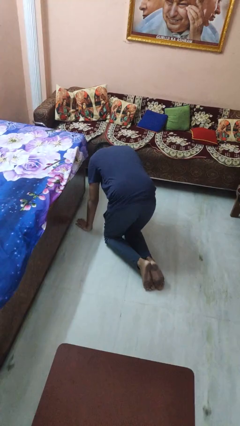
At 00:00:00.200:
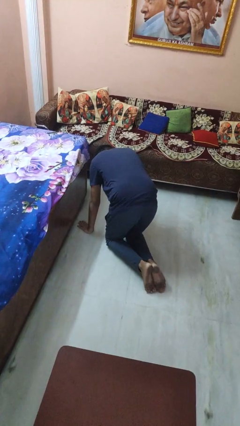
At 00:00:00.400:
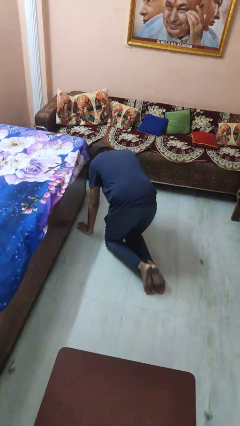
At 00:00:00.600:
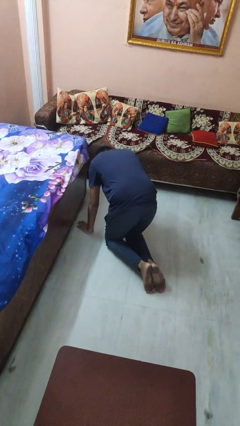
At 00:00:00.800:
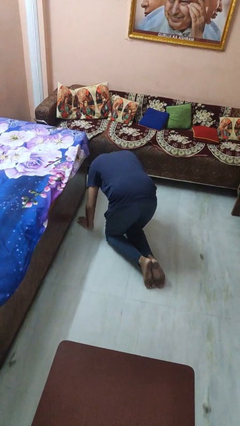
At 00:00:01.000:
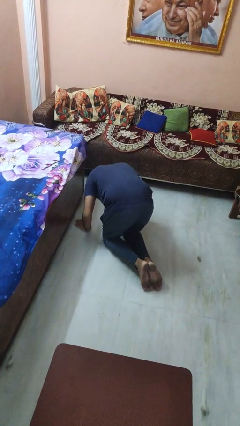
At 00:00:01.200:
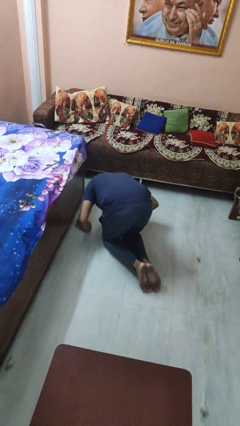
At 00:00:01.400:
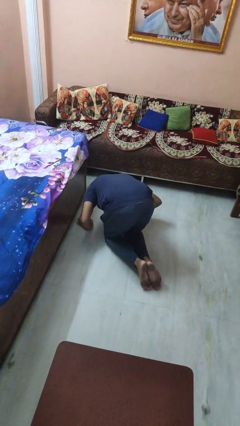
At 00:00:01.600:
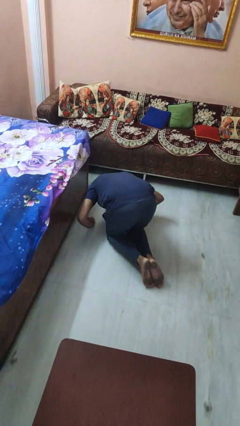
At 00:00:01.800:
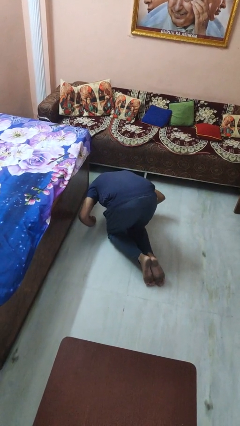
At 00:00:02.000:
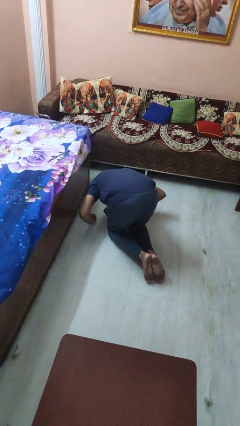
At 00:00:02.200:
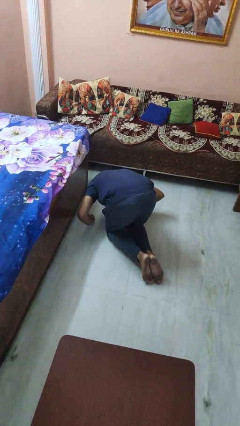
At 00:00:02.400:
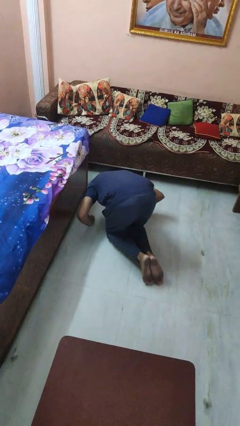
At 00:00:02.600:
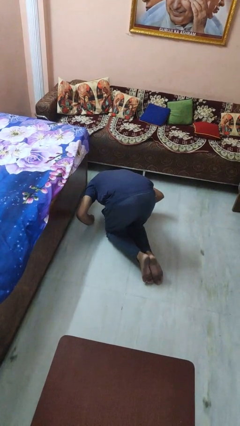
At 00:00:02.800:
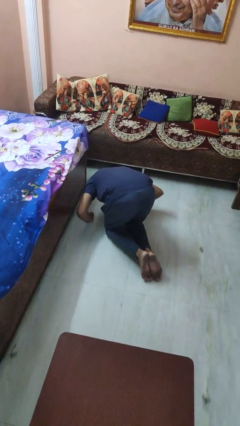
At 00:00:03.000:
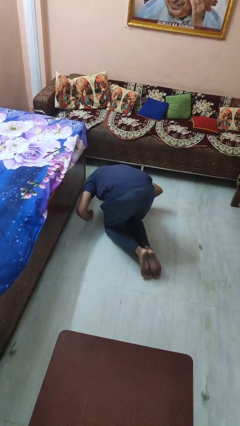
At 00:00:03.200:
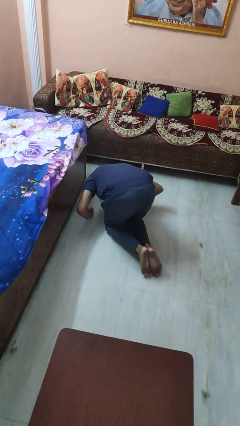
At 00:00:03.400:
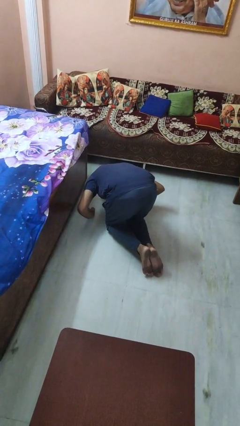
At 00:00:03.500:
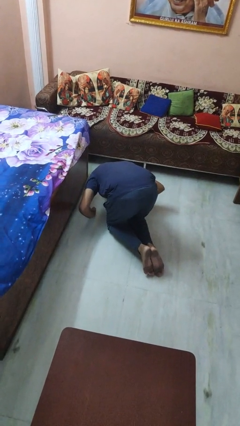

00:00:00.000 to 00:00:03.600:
person searches under bed

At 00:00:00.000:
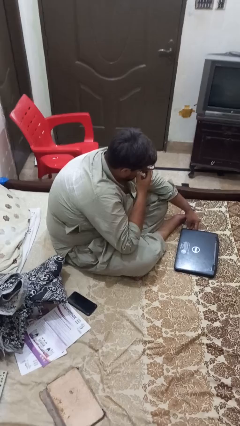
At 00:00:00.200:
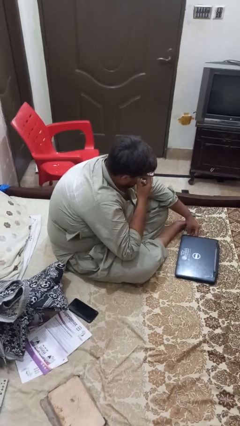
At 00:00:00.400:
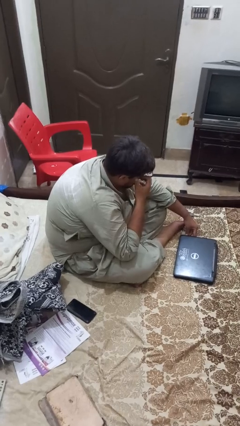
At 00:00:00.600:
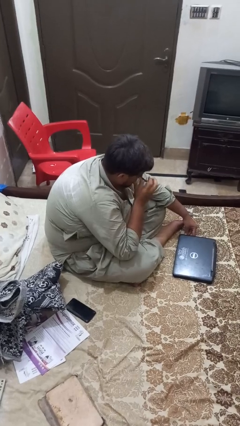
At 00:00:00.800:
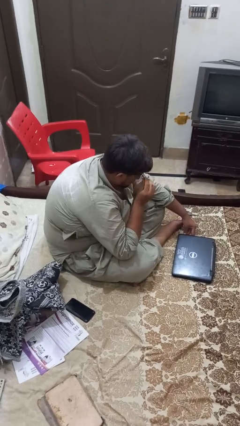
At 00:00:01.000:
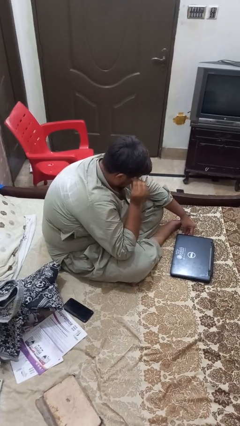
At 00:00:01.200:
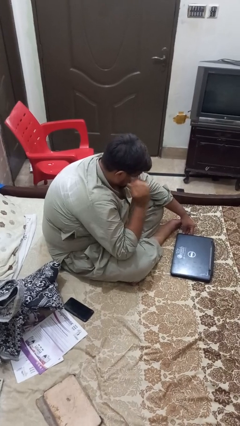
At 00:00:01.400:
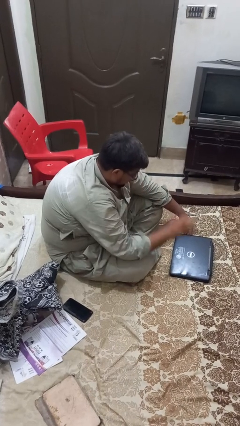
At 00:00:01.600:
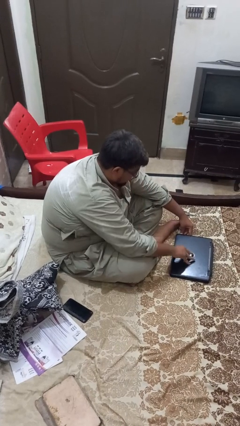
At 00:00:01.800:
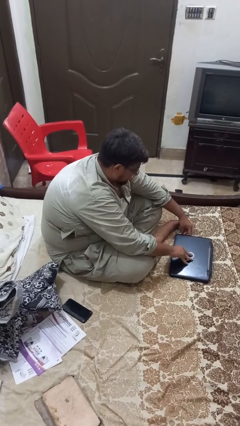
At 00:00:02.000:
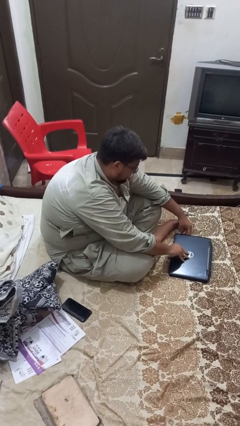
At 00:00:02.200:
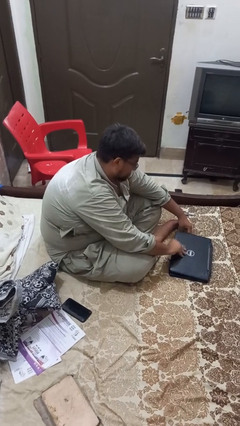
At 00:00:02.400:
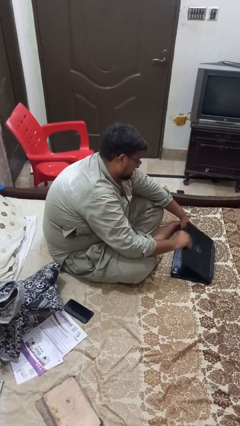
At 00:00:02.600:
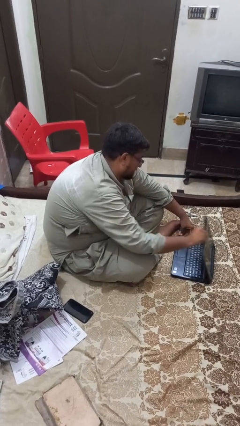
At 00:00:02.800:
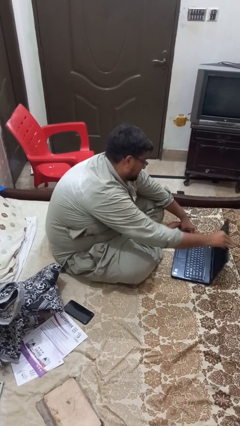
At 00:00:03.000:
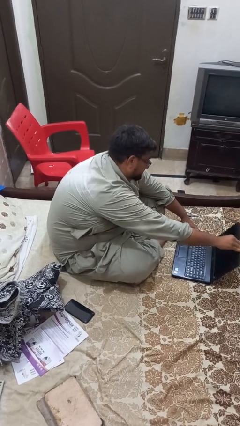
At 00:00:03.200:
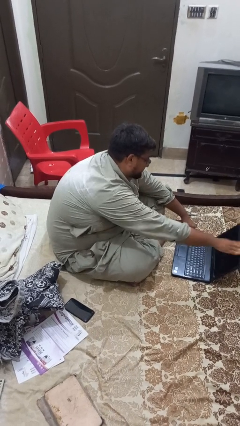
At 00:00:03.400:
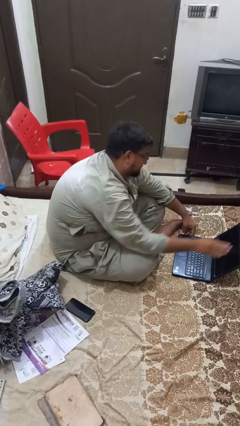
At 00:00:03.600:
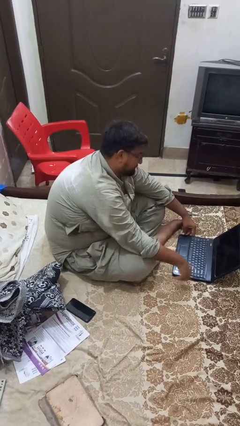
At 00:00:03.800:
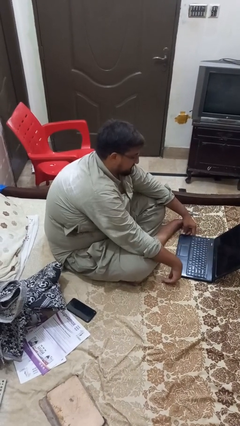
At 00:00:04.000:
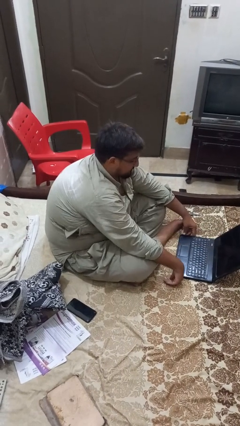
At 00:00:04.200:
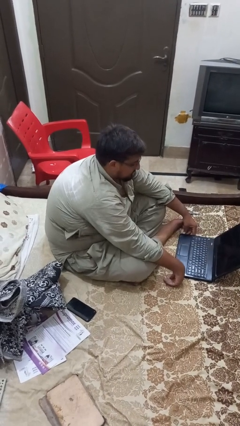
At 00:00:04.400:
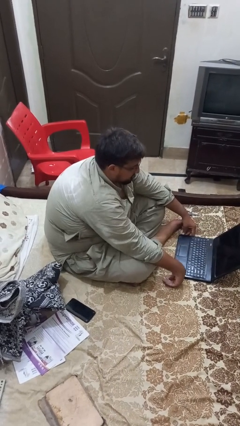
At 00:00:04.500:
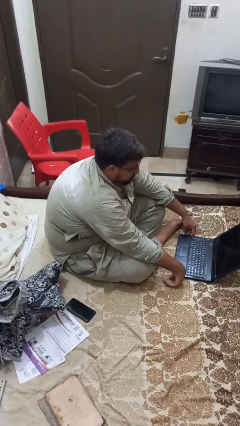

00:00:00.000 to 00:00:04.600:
person opens laptop

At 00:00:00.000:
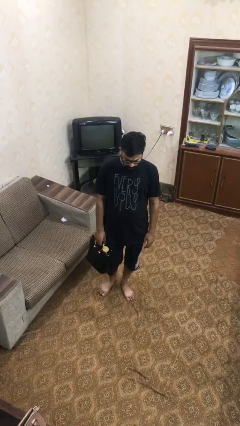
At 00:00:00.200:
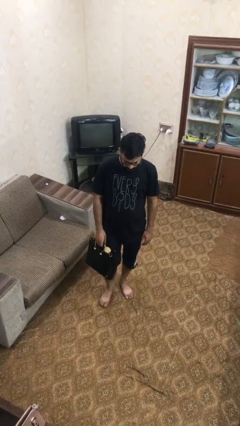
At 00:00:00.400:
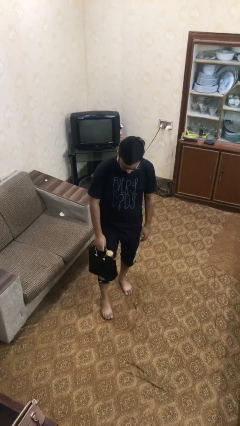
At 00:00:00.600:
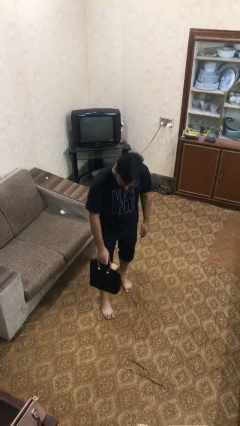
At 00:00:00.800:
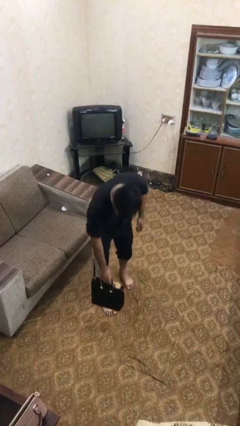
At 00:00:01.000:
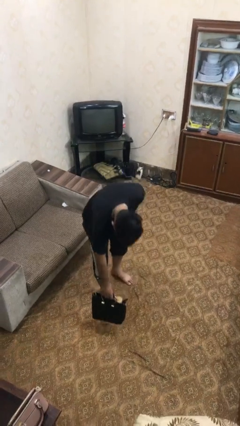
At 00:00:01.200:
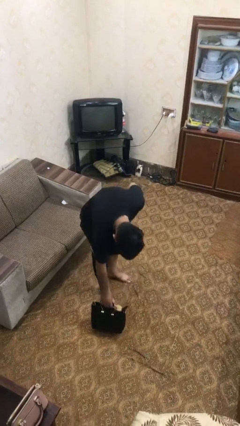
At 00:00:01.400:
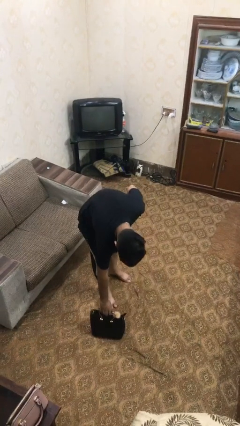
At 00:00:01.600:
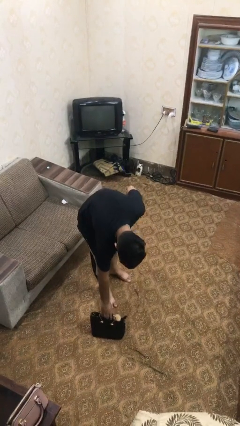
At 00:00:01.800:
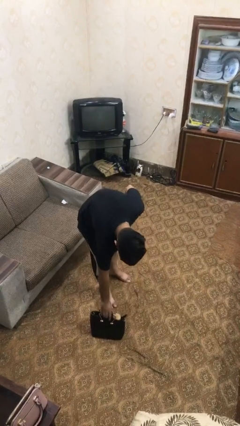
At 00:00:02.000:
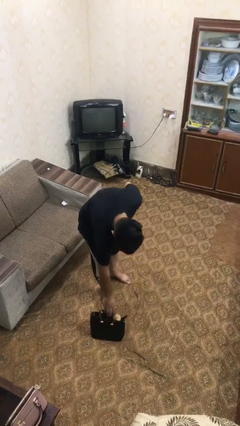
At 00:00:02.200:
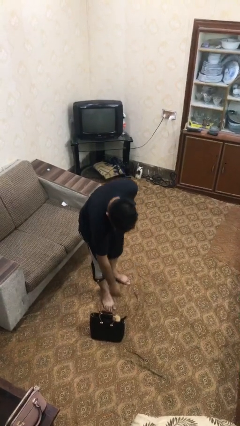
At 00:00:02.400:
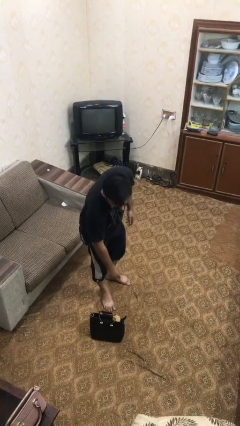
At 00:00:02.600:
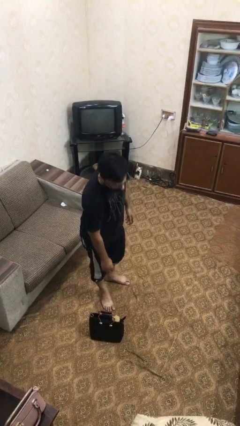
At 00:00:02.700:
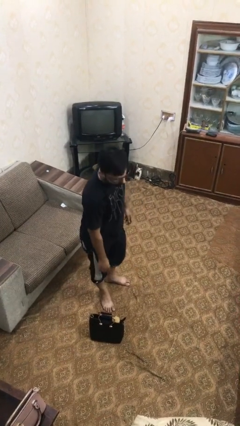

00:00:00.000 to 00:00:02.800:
person puts down object on floor

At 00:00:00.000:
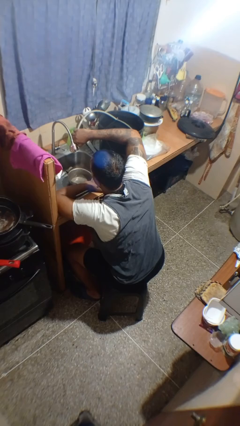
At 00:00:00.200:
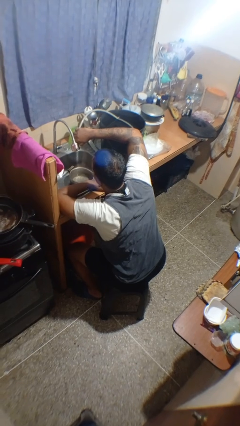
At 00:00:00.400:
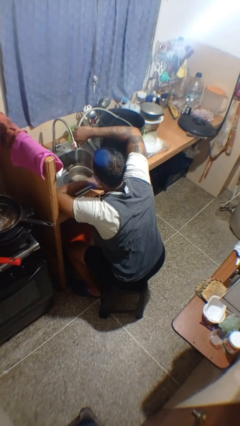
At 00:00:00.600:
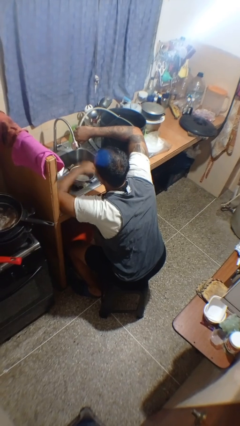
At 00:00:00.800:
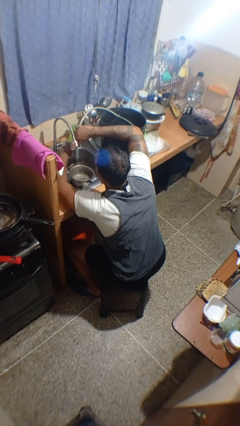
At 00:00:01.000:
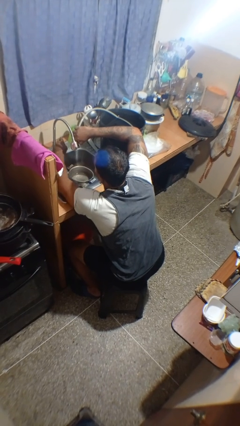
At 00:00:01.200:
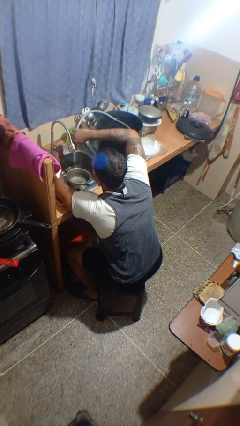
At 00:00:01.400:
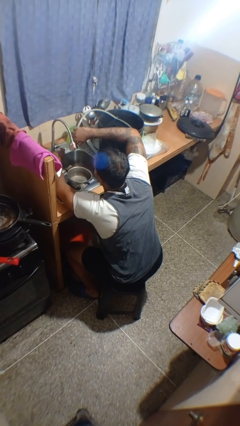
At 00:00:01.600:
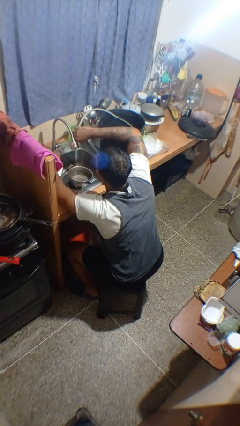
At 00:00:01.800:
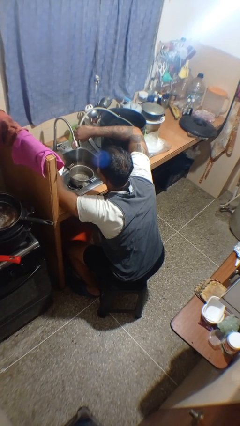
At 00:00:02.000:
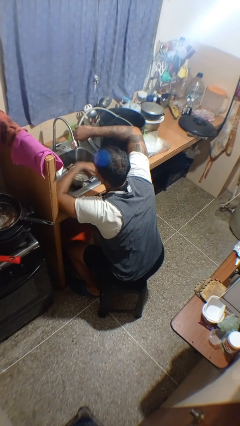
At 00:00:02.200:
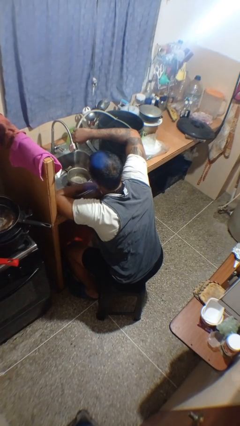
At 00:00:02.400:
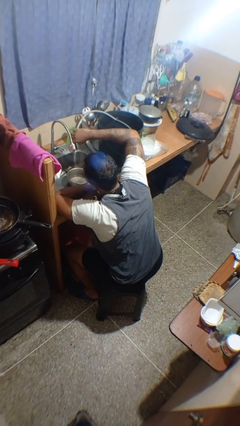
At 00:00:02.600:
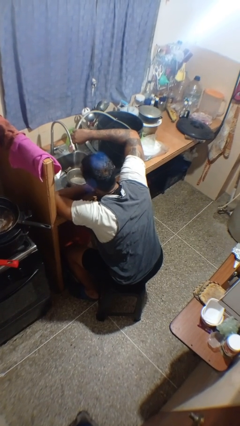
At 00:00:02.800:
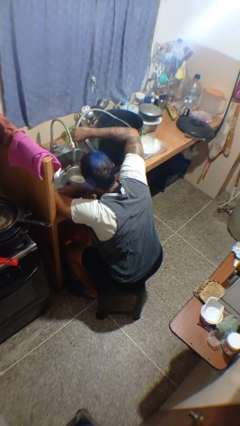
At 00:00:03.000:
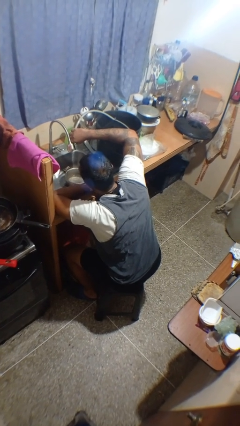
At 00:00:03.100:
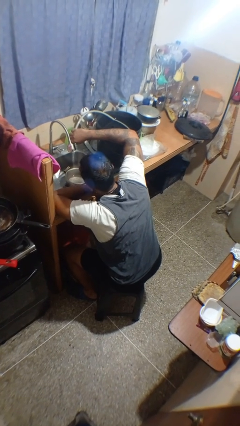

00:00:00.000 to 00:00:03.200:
person turns on faucet

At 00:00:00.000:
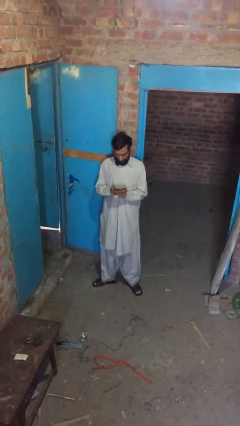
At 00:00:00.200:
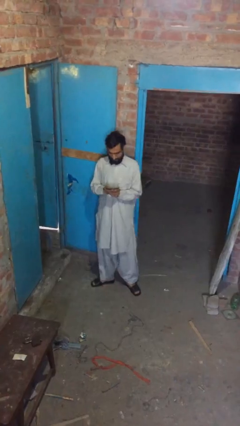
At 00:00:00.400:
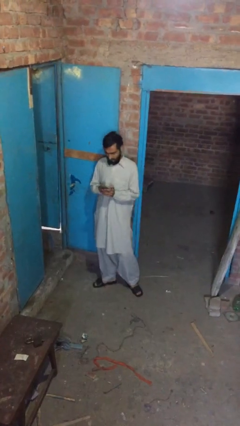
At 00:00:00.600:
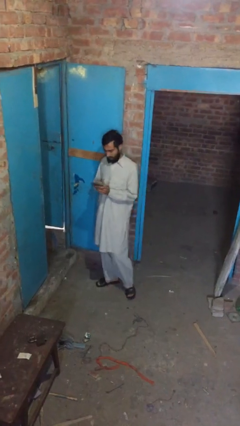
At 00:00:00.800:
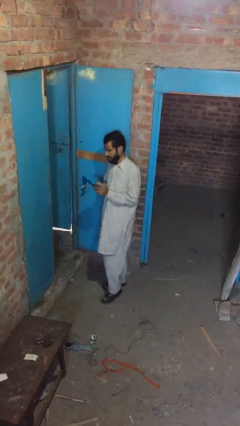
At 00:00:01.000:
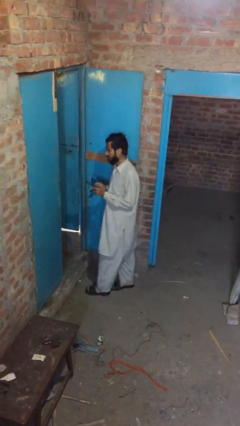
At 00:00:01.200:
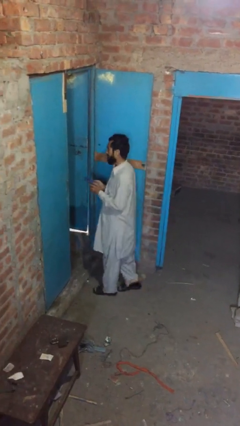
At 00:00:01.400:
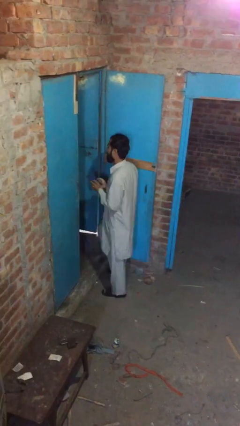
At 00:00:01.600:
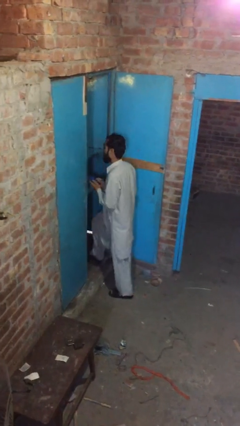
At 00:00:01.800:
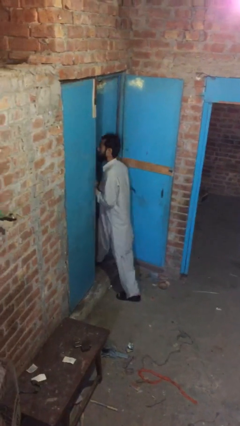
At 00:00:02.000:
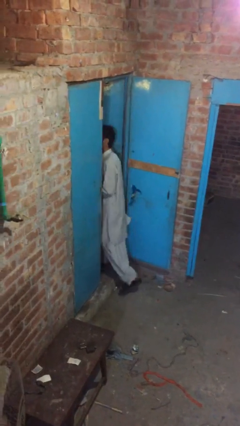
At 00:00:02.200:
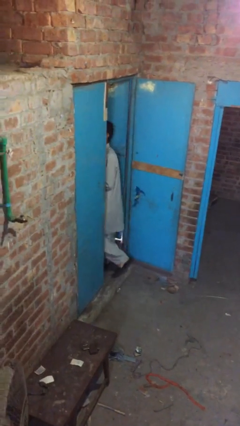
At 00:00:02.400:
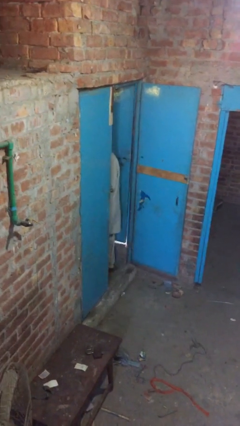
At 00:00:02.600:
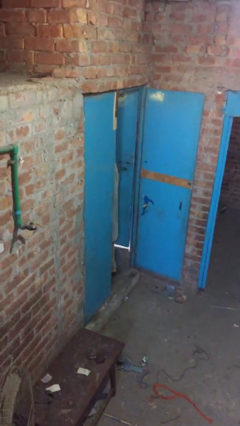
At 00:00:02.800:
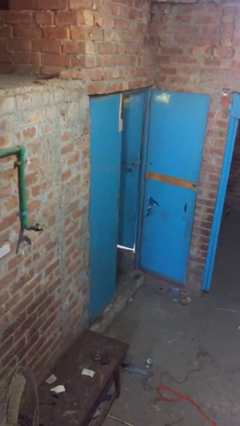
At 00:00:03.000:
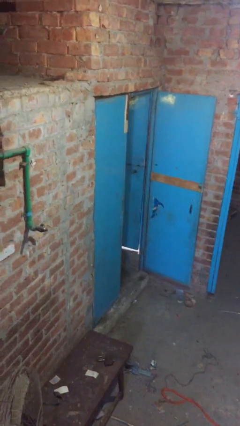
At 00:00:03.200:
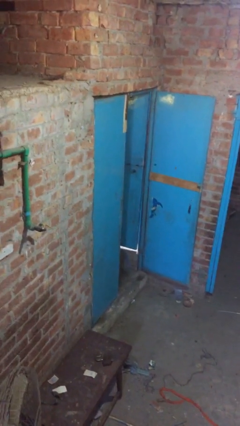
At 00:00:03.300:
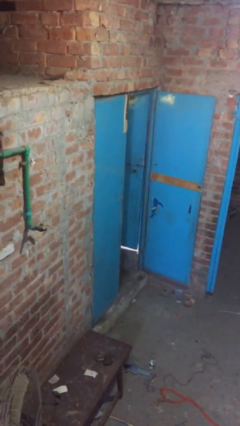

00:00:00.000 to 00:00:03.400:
person exits scene through structure
